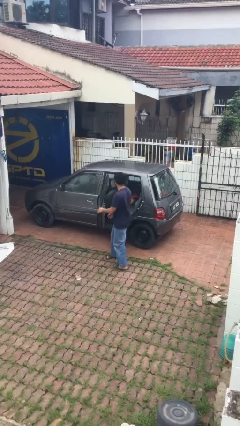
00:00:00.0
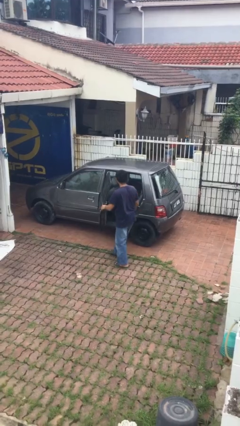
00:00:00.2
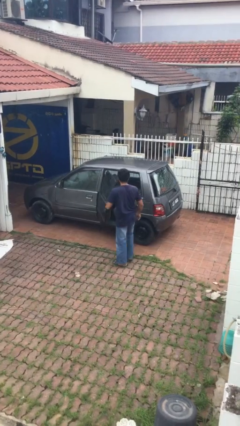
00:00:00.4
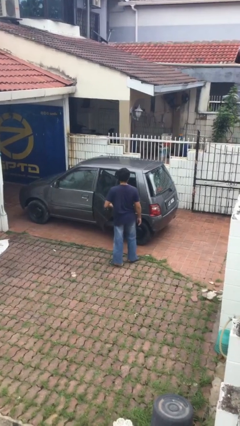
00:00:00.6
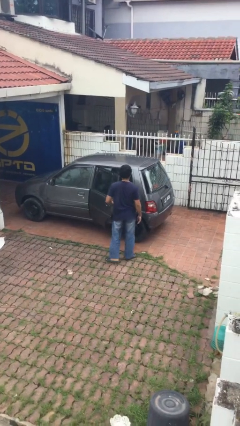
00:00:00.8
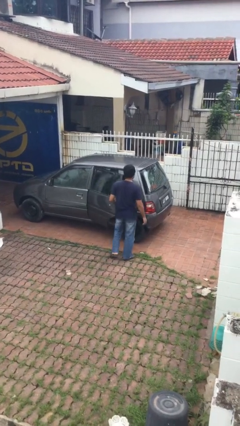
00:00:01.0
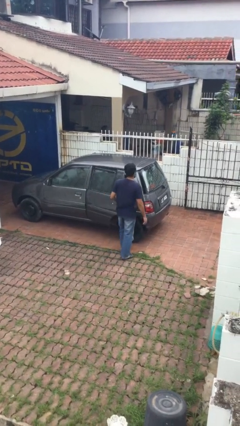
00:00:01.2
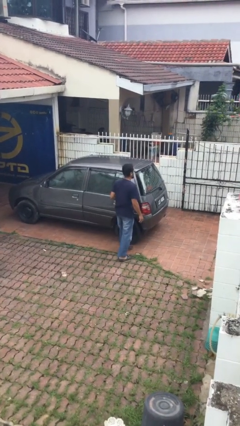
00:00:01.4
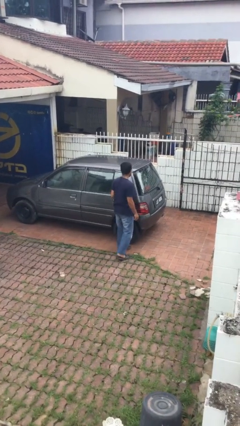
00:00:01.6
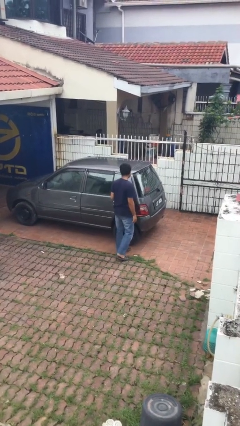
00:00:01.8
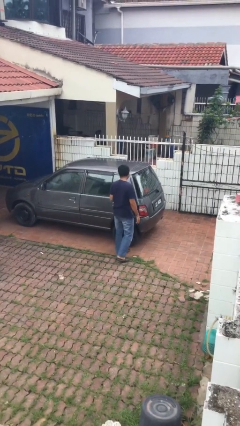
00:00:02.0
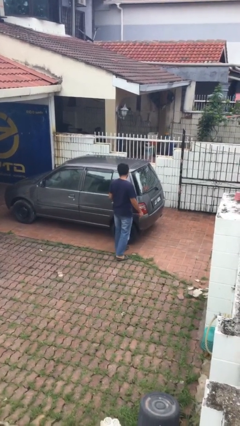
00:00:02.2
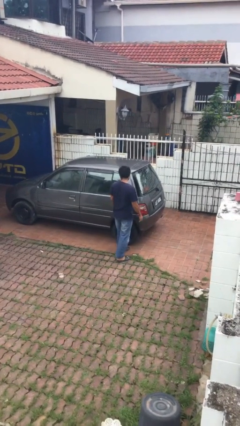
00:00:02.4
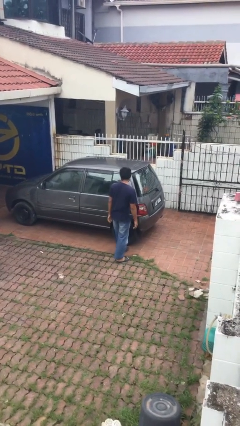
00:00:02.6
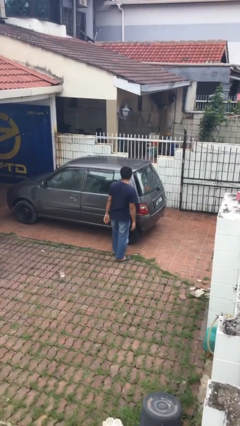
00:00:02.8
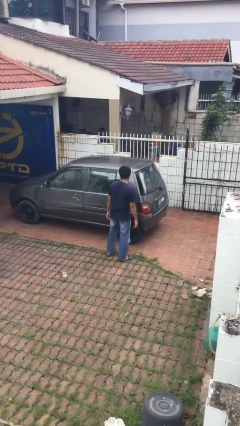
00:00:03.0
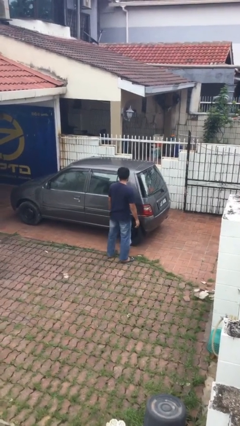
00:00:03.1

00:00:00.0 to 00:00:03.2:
person closes car door

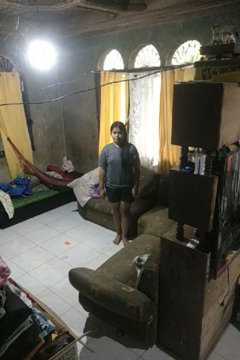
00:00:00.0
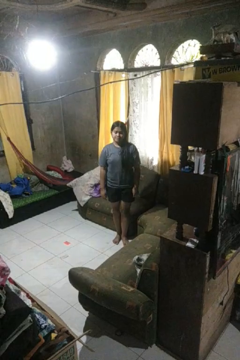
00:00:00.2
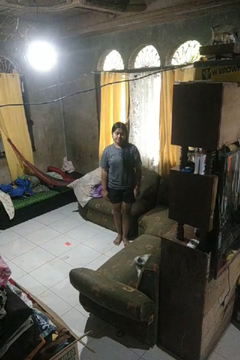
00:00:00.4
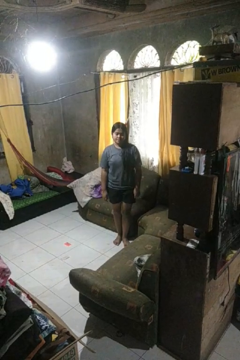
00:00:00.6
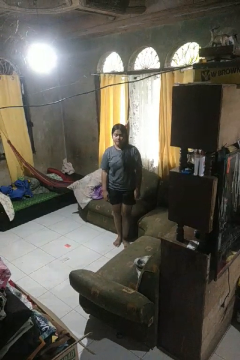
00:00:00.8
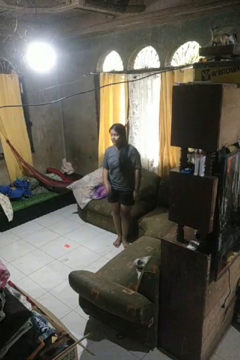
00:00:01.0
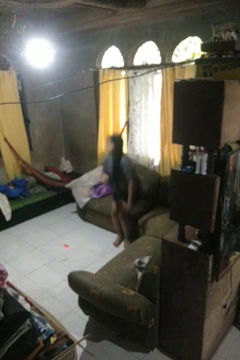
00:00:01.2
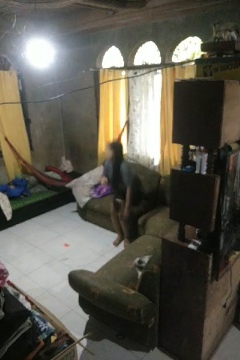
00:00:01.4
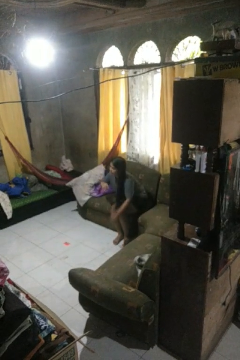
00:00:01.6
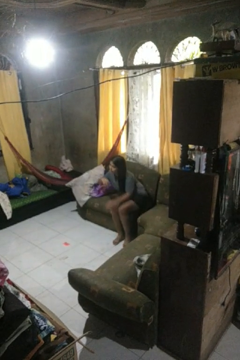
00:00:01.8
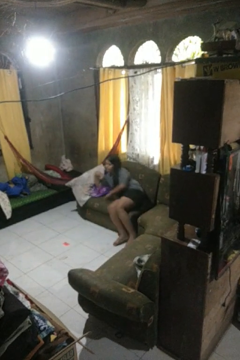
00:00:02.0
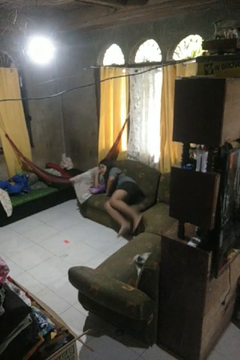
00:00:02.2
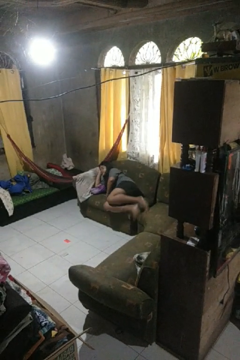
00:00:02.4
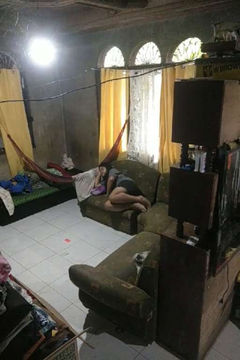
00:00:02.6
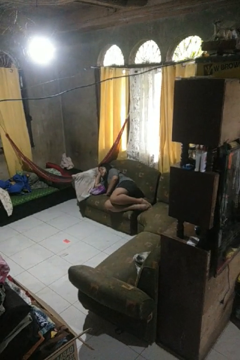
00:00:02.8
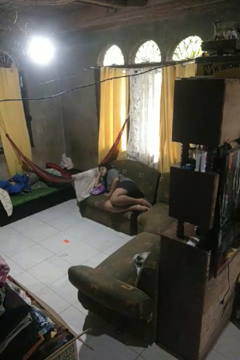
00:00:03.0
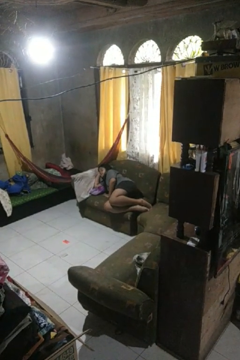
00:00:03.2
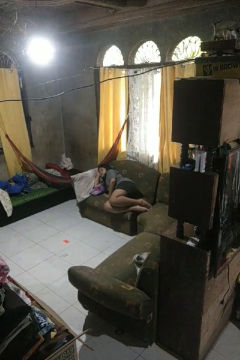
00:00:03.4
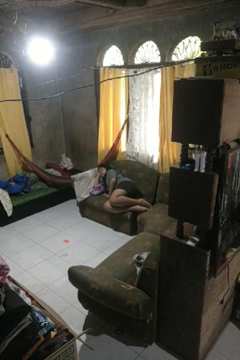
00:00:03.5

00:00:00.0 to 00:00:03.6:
person lies down on couch

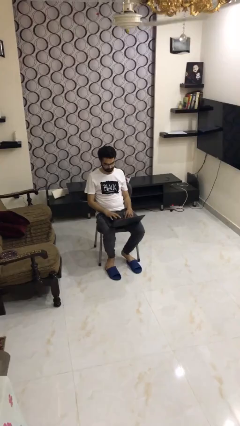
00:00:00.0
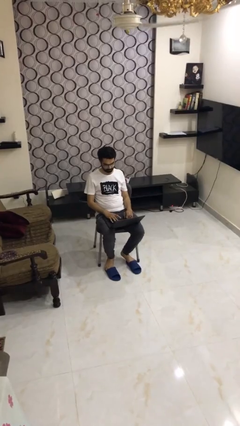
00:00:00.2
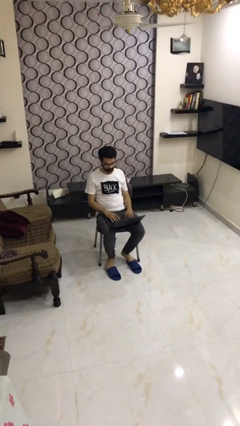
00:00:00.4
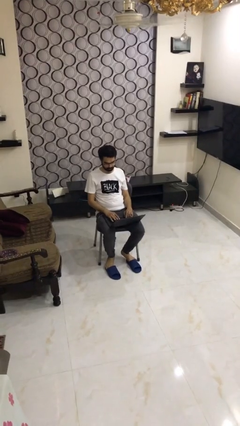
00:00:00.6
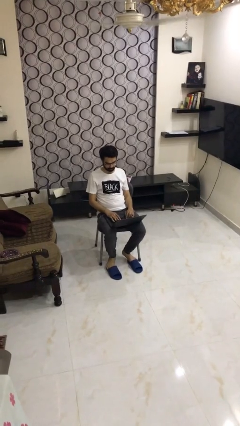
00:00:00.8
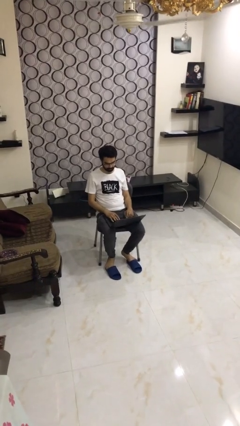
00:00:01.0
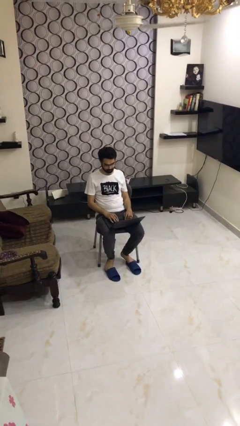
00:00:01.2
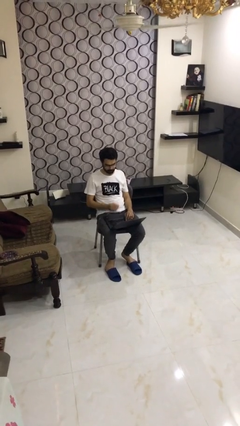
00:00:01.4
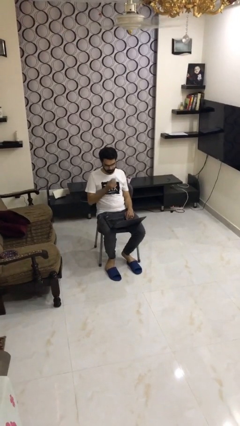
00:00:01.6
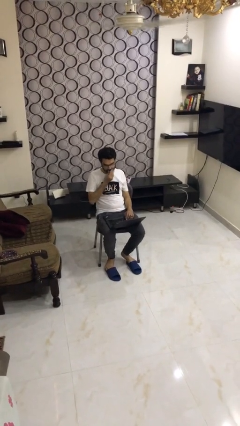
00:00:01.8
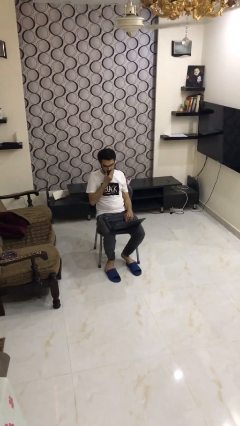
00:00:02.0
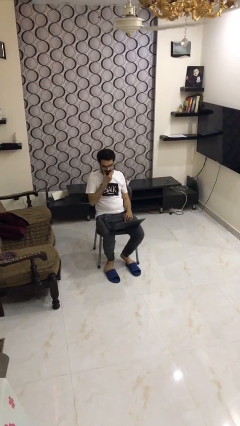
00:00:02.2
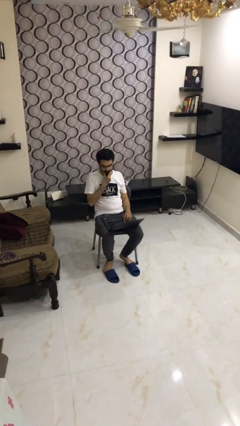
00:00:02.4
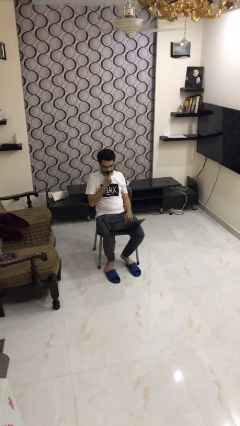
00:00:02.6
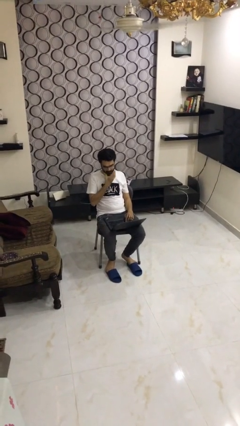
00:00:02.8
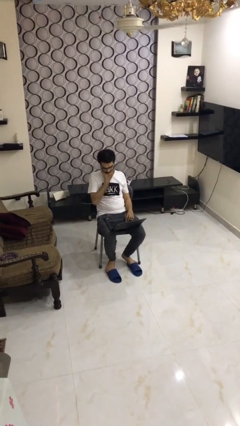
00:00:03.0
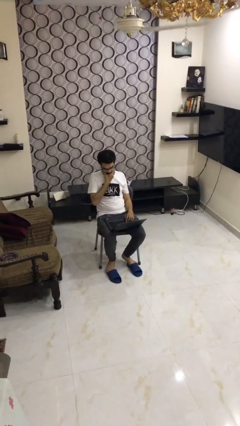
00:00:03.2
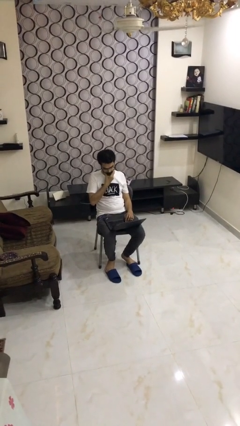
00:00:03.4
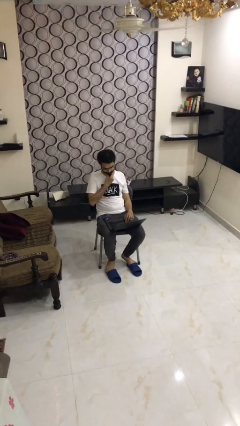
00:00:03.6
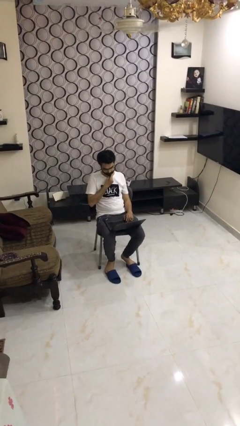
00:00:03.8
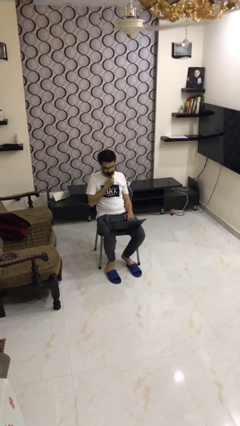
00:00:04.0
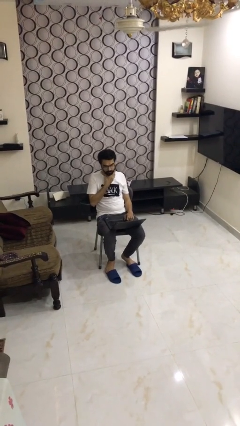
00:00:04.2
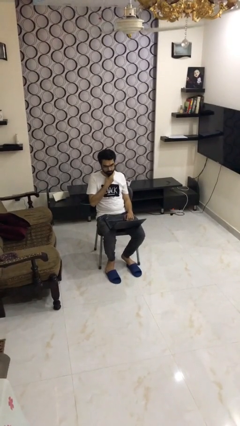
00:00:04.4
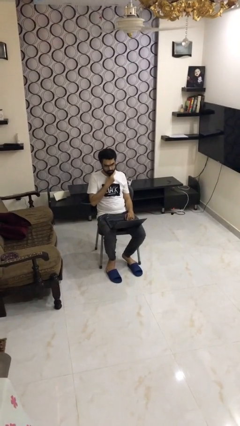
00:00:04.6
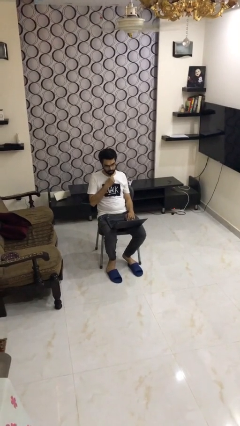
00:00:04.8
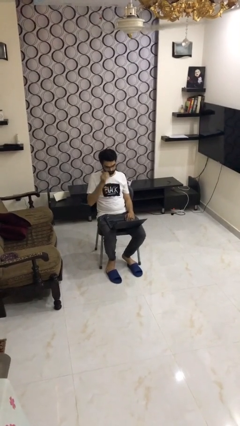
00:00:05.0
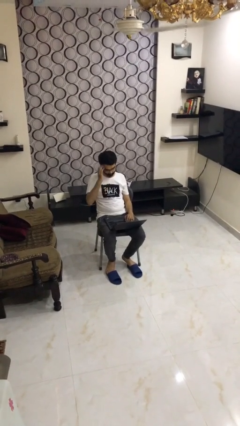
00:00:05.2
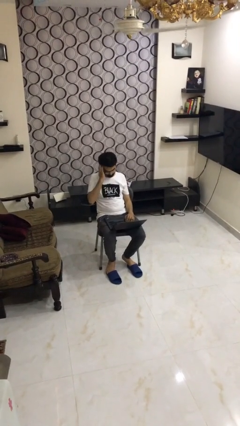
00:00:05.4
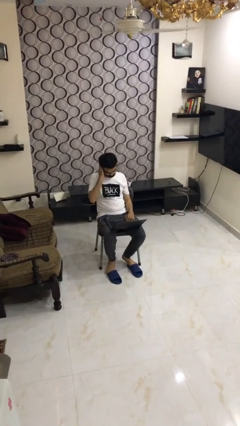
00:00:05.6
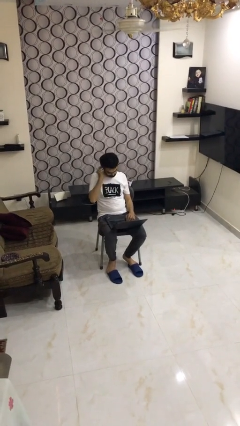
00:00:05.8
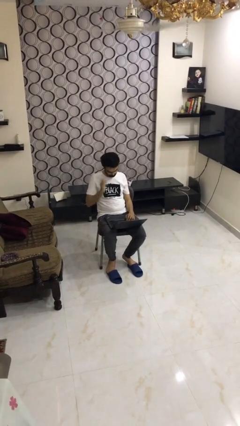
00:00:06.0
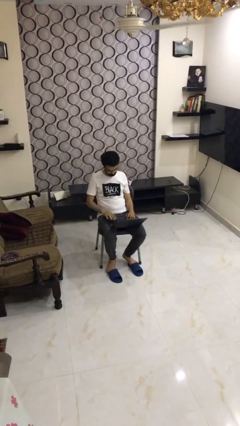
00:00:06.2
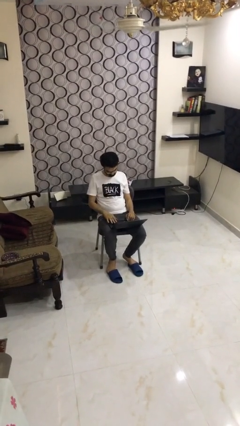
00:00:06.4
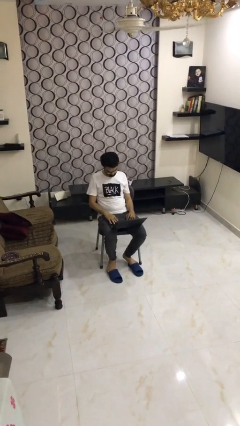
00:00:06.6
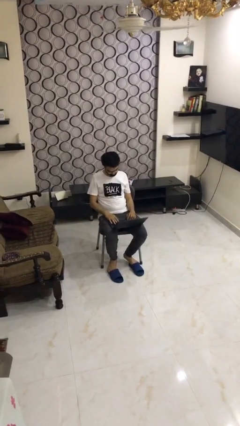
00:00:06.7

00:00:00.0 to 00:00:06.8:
person interacts with laptop

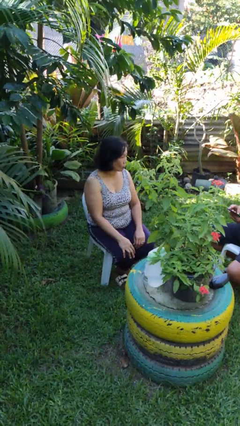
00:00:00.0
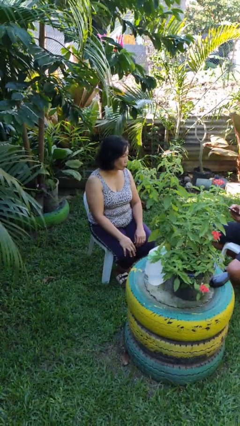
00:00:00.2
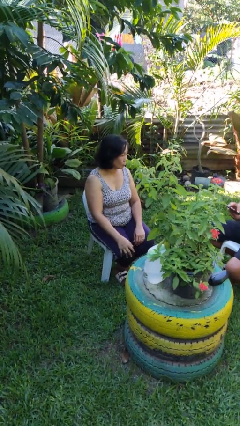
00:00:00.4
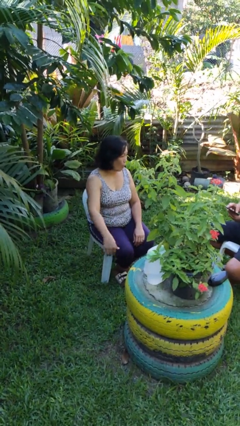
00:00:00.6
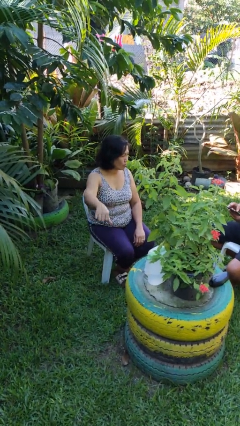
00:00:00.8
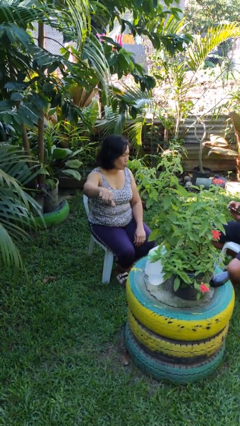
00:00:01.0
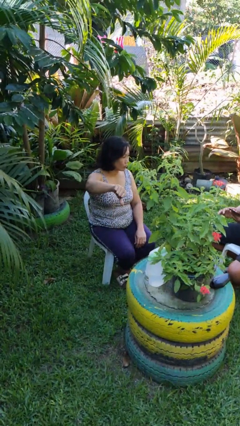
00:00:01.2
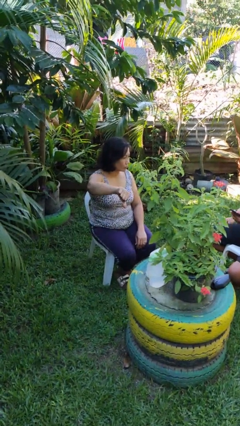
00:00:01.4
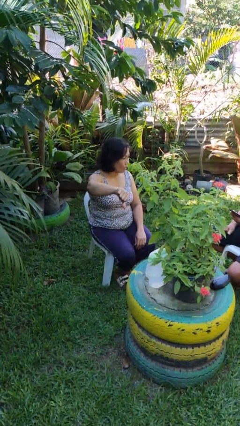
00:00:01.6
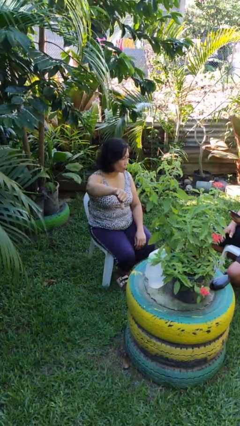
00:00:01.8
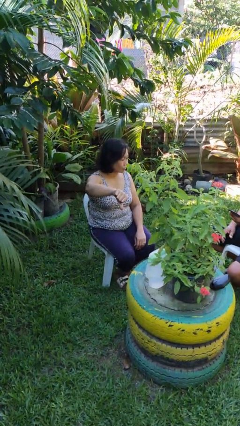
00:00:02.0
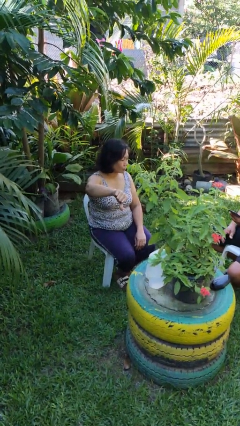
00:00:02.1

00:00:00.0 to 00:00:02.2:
person gestures thumbs down

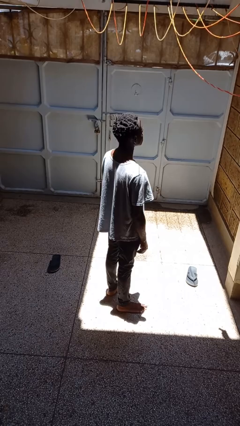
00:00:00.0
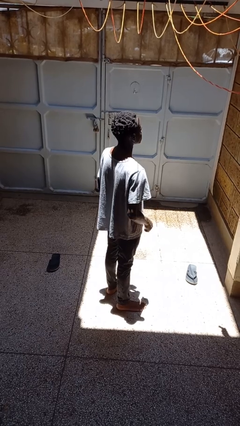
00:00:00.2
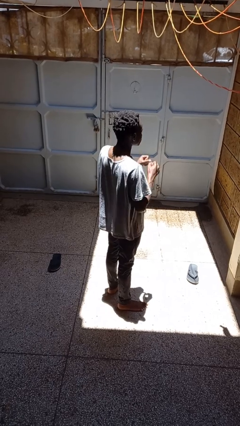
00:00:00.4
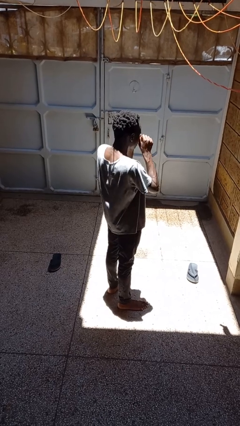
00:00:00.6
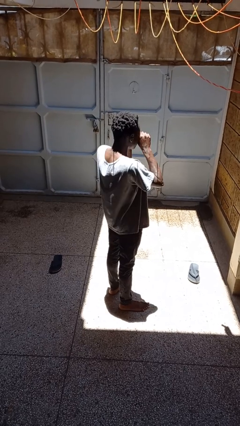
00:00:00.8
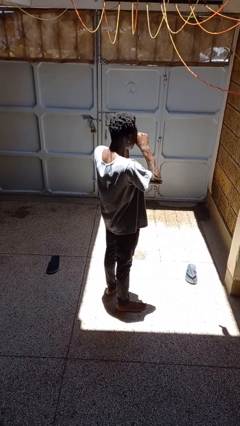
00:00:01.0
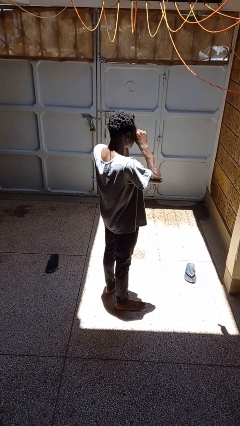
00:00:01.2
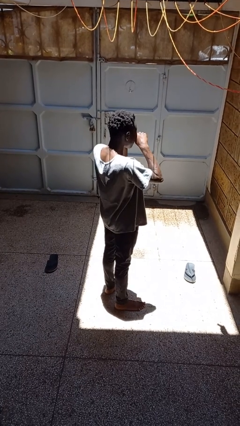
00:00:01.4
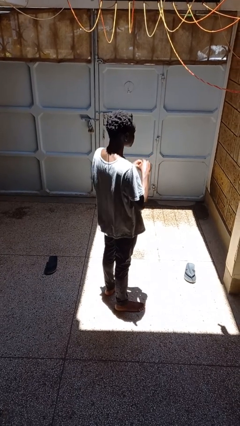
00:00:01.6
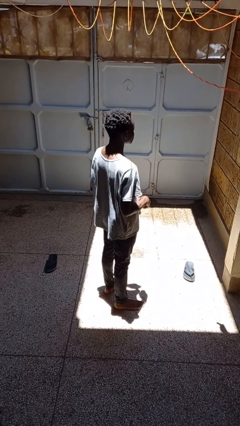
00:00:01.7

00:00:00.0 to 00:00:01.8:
person rubs eyes

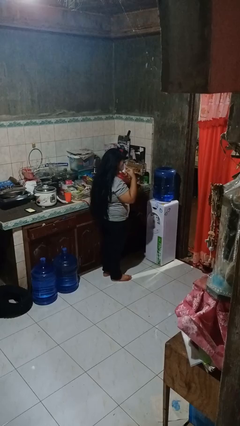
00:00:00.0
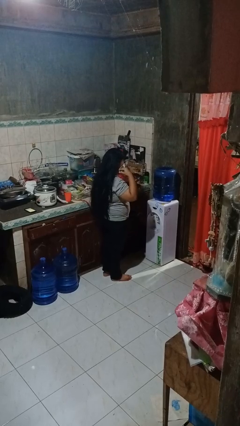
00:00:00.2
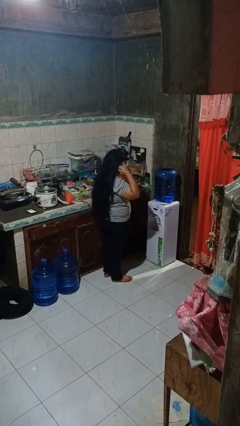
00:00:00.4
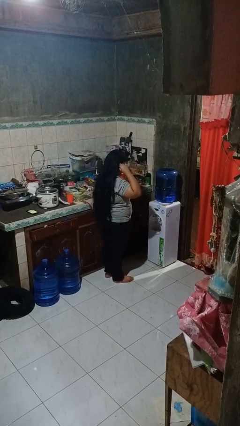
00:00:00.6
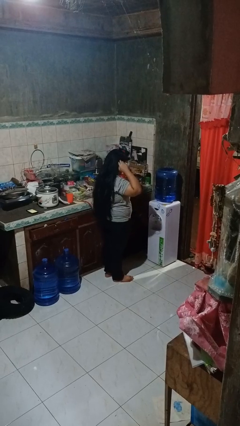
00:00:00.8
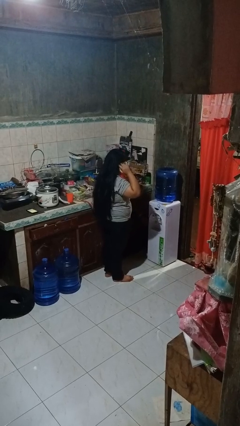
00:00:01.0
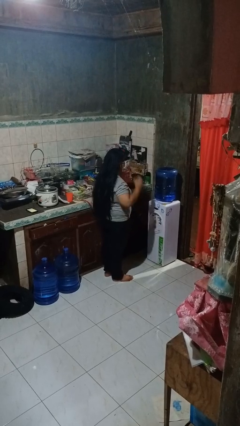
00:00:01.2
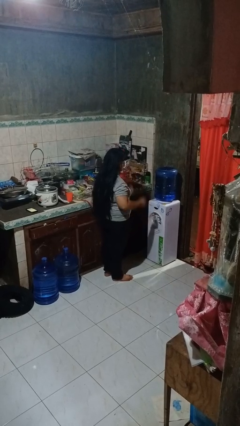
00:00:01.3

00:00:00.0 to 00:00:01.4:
person puts on facemask
